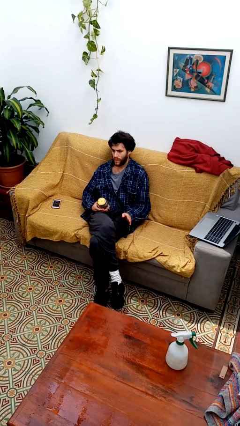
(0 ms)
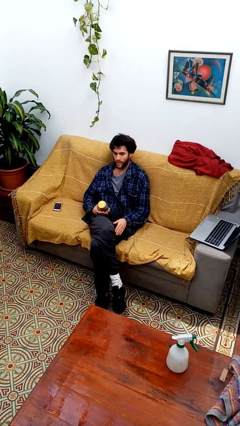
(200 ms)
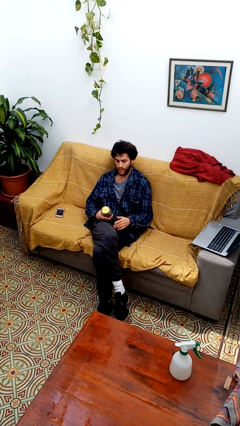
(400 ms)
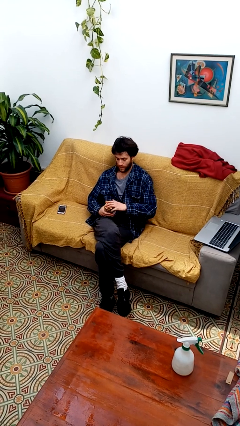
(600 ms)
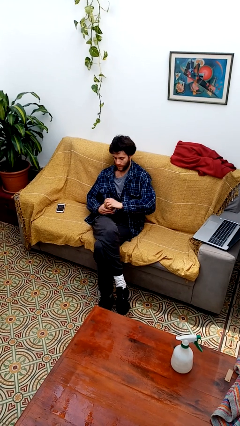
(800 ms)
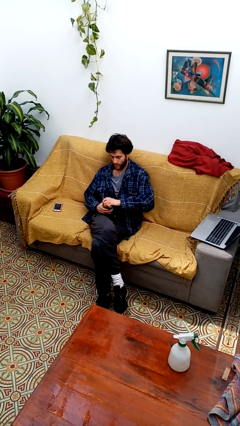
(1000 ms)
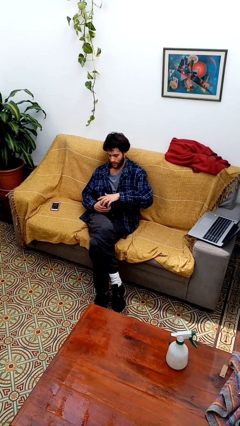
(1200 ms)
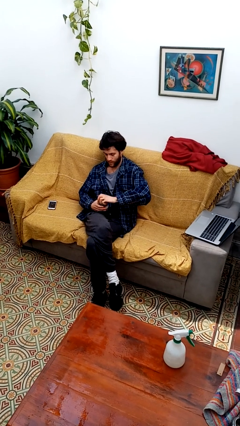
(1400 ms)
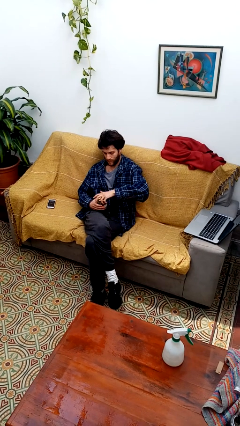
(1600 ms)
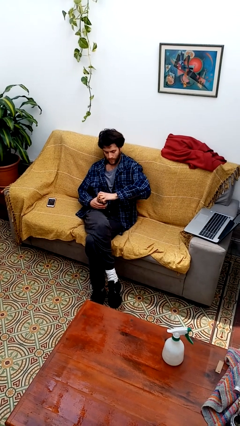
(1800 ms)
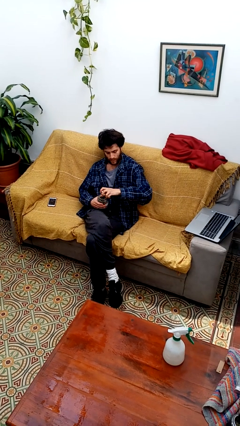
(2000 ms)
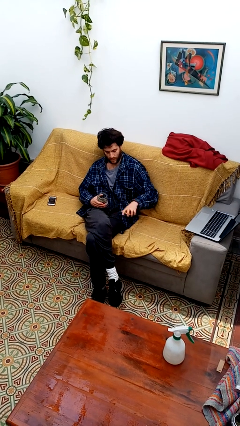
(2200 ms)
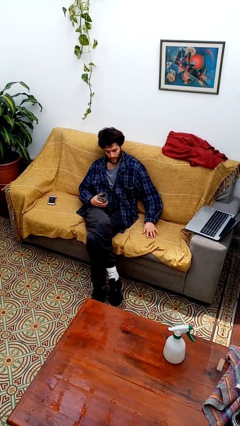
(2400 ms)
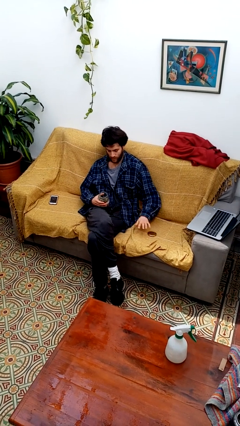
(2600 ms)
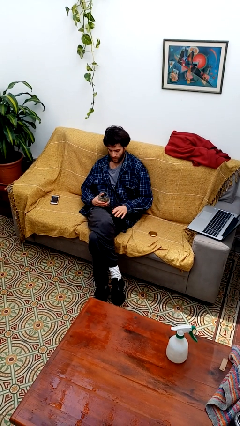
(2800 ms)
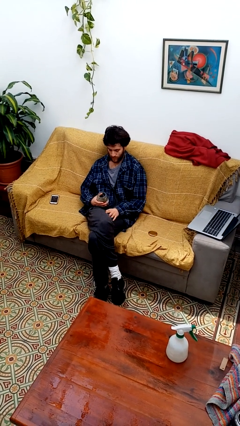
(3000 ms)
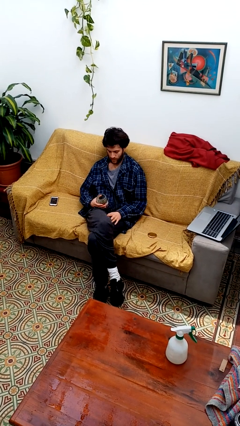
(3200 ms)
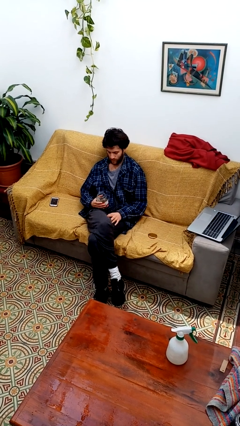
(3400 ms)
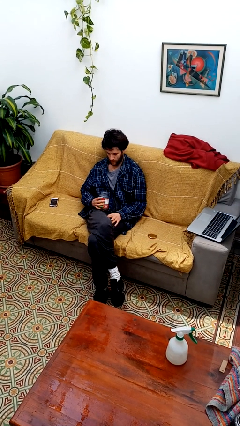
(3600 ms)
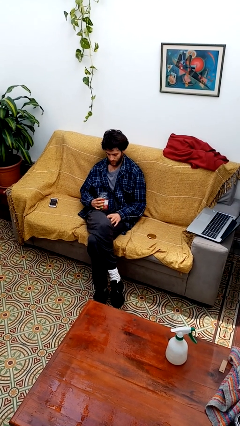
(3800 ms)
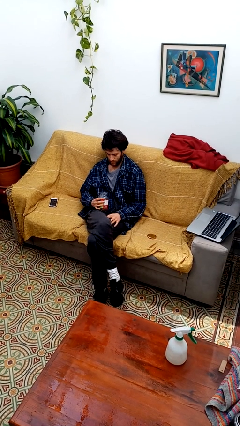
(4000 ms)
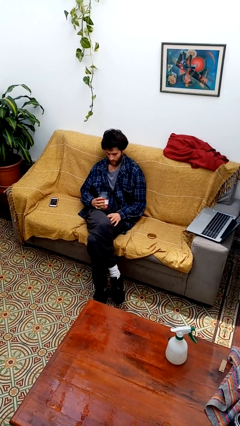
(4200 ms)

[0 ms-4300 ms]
person opens jar

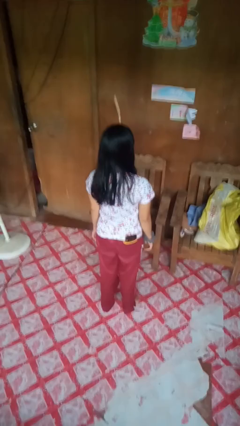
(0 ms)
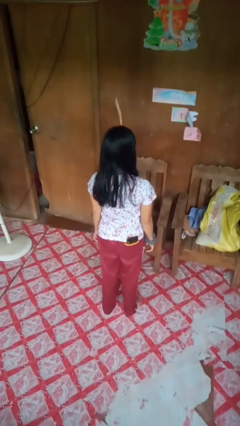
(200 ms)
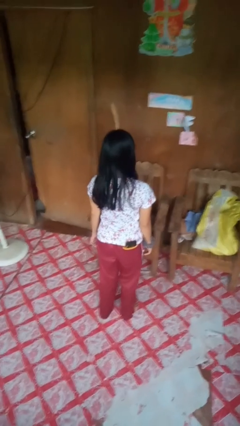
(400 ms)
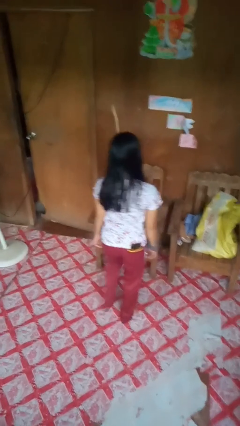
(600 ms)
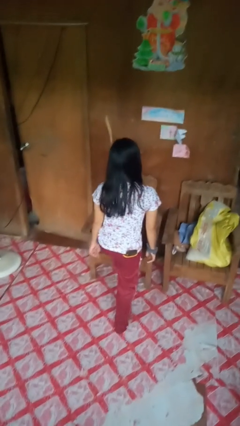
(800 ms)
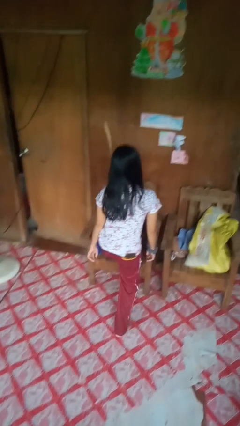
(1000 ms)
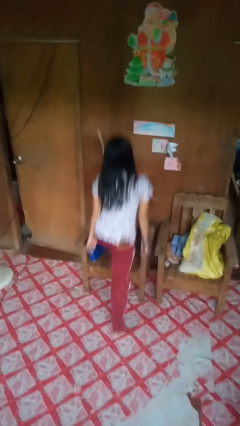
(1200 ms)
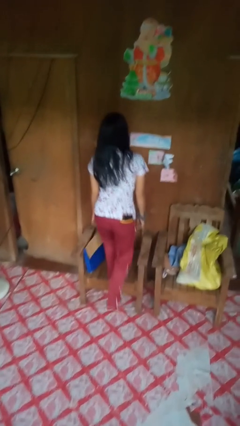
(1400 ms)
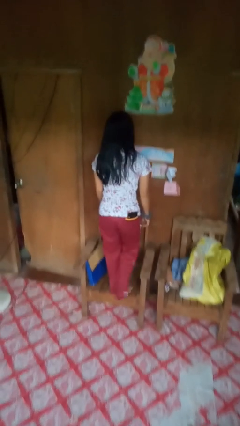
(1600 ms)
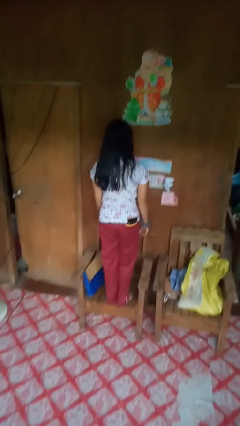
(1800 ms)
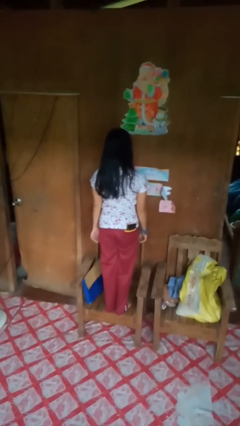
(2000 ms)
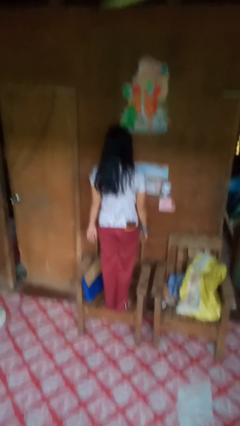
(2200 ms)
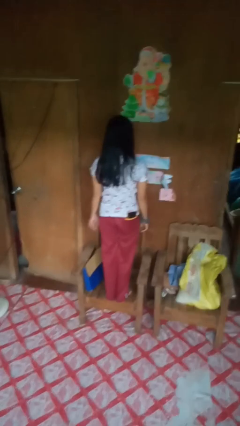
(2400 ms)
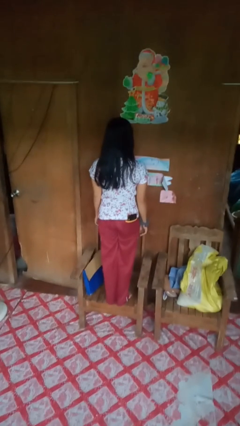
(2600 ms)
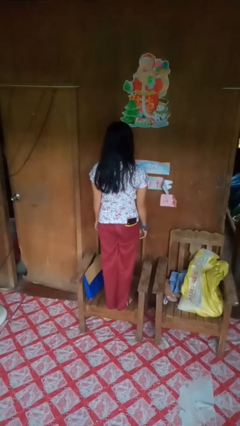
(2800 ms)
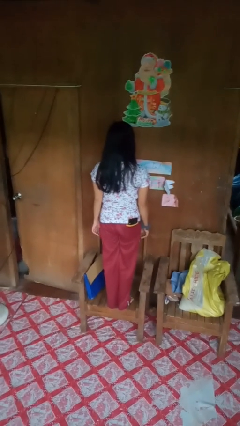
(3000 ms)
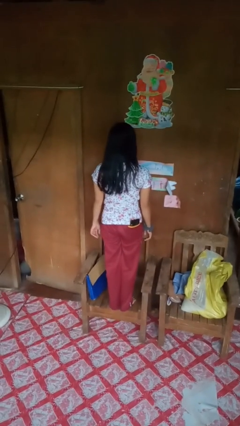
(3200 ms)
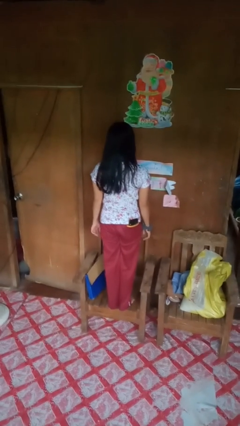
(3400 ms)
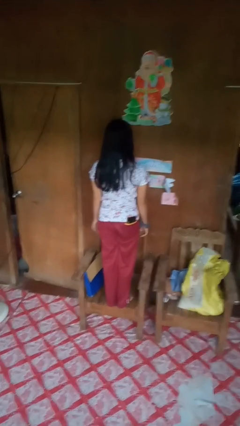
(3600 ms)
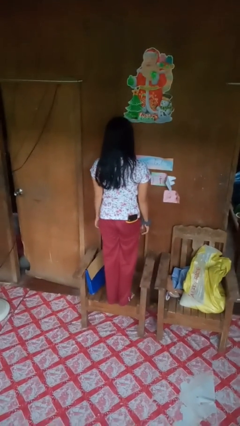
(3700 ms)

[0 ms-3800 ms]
person climbs on chair

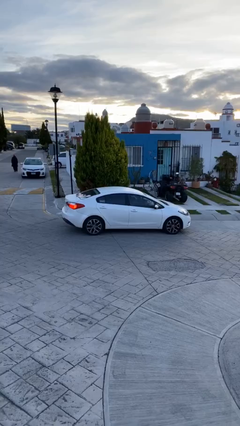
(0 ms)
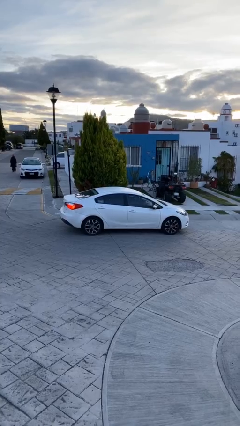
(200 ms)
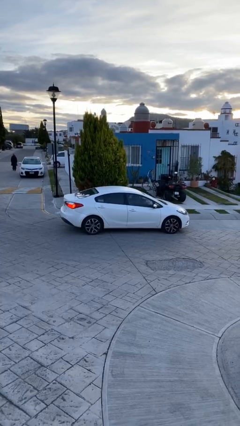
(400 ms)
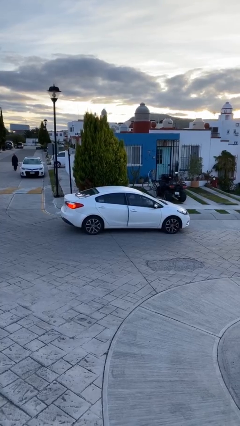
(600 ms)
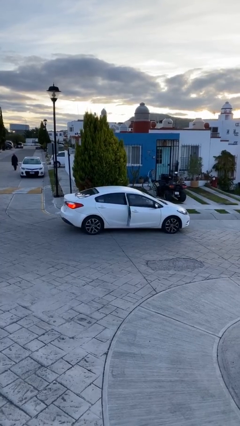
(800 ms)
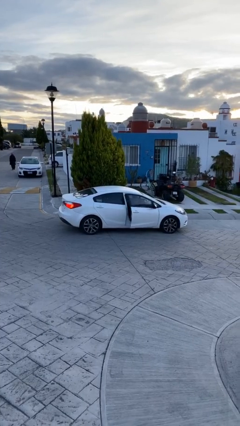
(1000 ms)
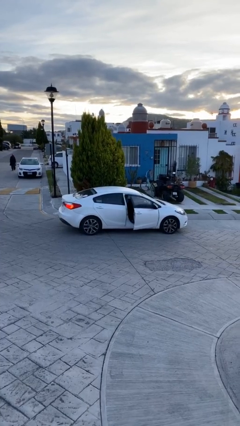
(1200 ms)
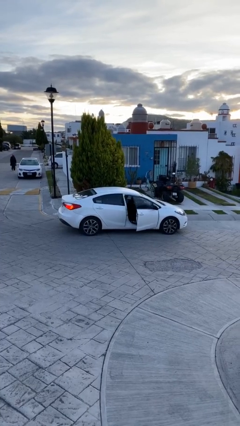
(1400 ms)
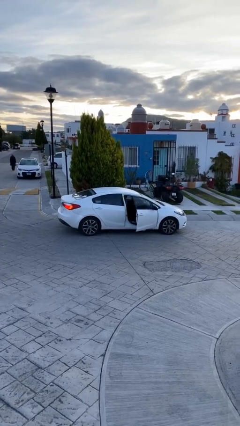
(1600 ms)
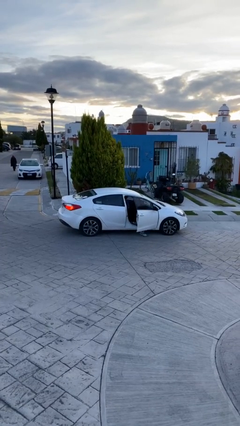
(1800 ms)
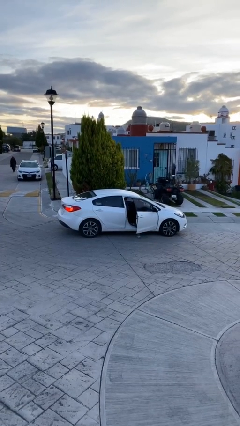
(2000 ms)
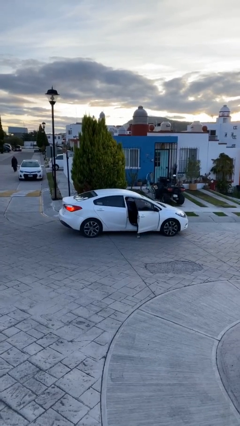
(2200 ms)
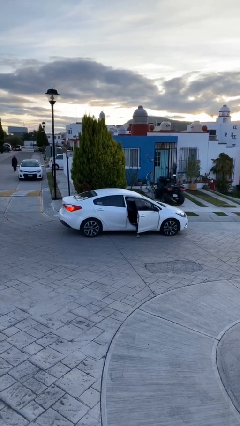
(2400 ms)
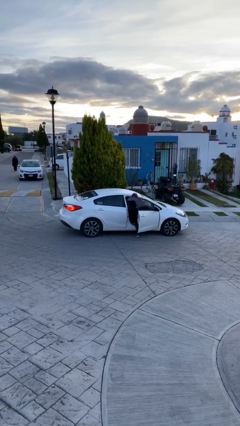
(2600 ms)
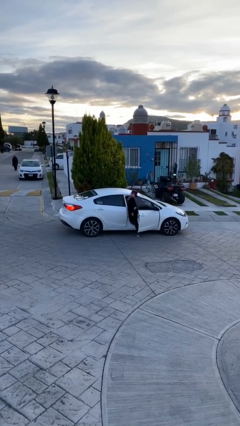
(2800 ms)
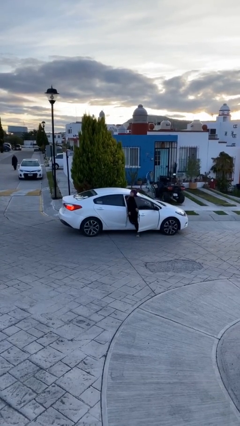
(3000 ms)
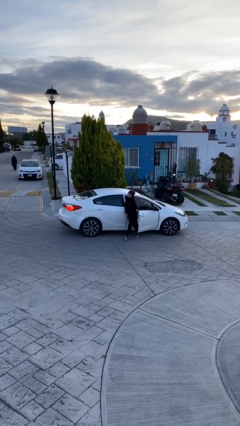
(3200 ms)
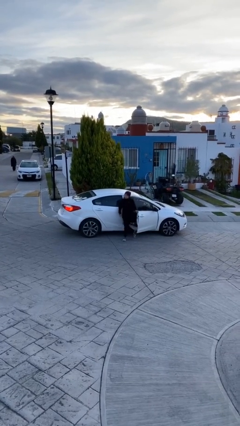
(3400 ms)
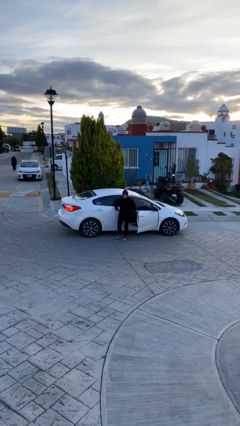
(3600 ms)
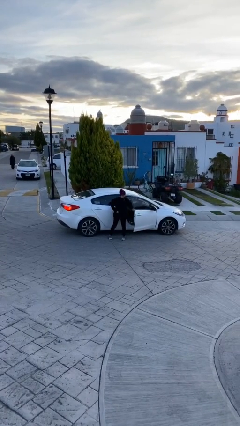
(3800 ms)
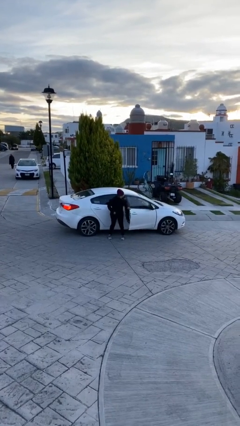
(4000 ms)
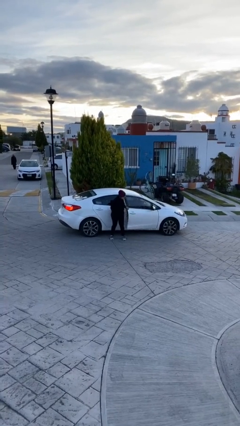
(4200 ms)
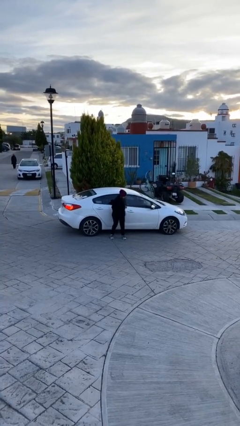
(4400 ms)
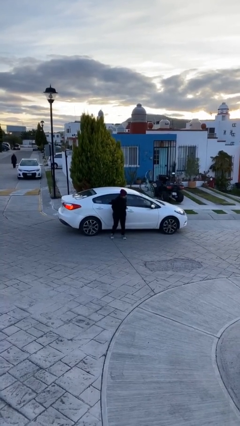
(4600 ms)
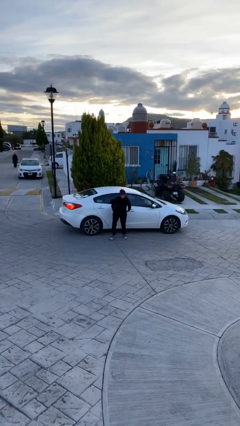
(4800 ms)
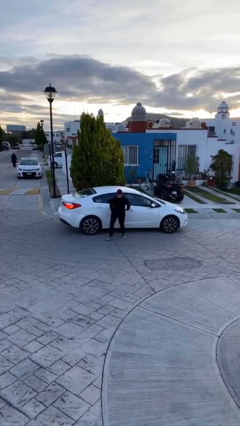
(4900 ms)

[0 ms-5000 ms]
car drops off person

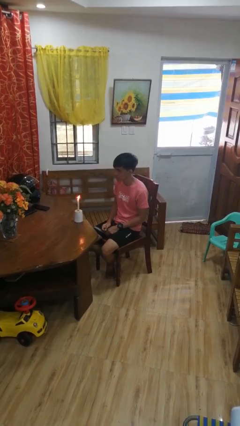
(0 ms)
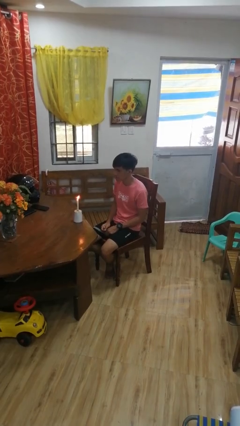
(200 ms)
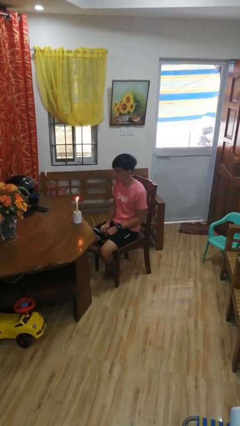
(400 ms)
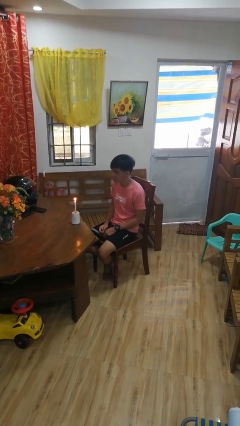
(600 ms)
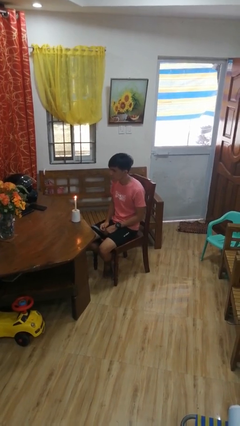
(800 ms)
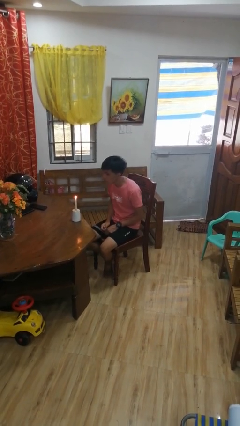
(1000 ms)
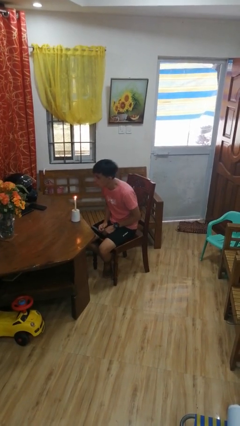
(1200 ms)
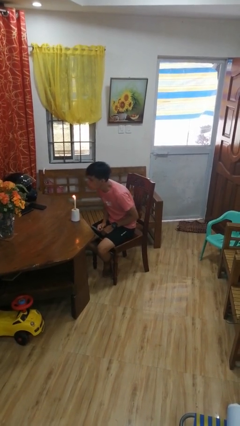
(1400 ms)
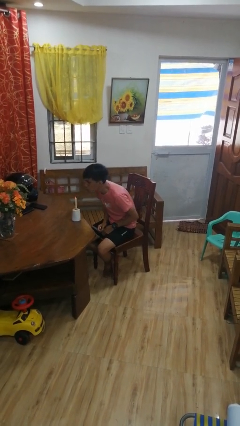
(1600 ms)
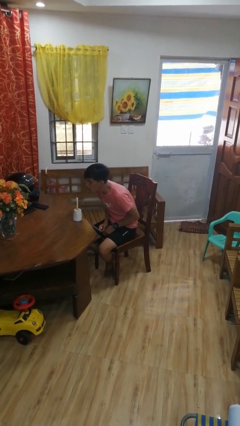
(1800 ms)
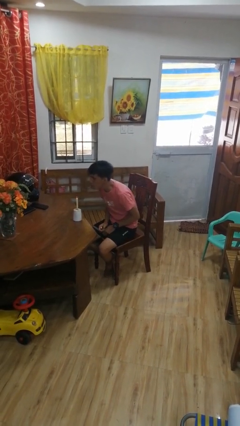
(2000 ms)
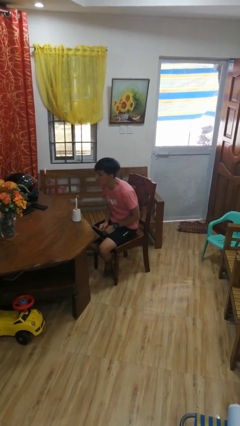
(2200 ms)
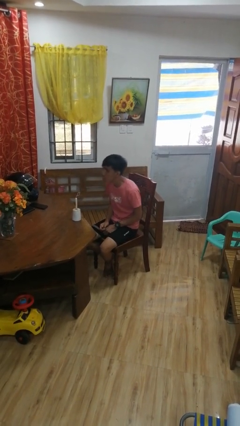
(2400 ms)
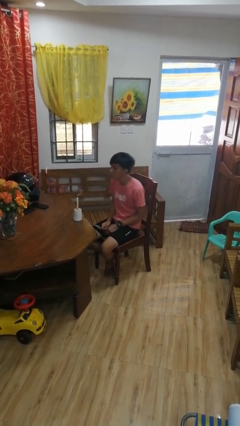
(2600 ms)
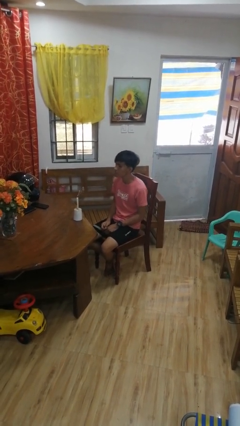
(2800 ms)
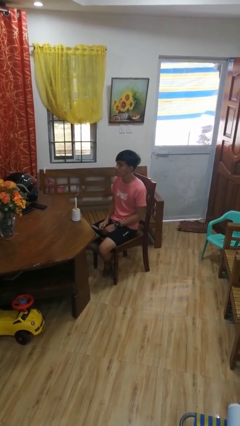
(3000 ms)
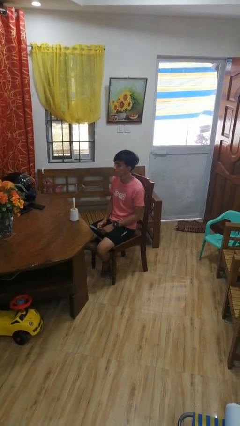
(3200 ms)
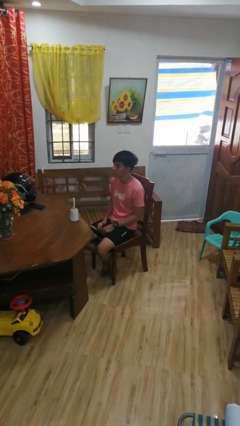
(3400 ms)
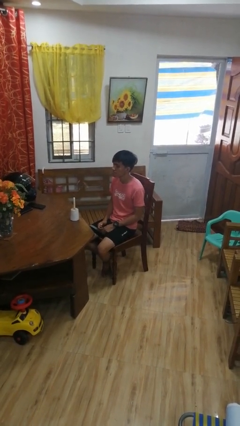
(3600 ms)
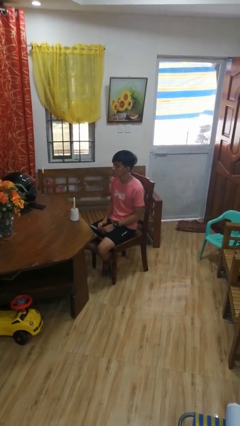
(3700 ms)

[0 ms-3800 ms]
person extinguishes candle

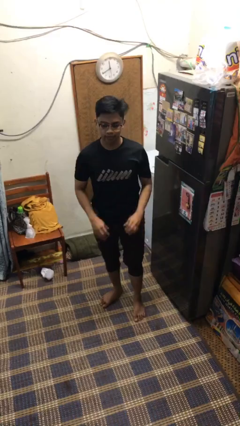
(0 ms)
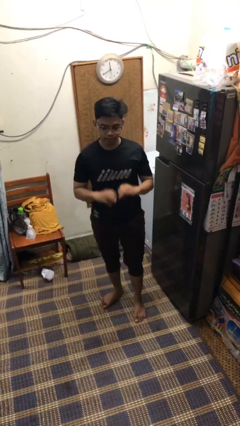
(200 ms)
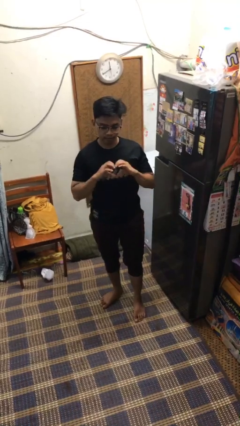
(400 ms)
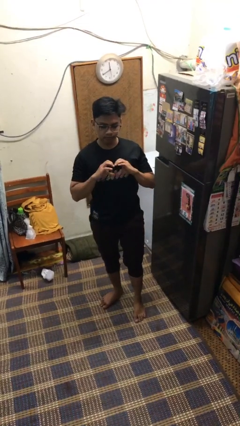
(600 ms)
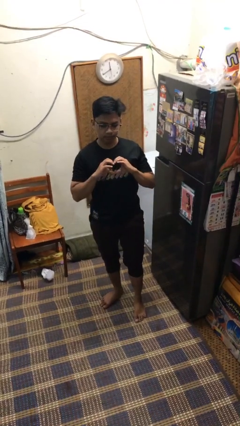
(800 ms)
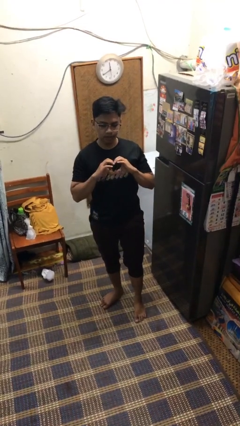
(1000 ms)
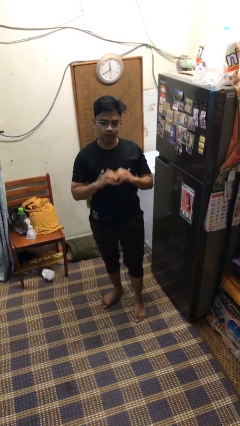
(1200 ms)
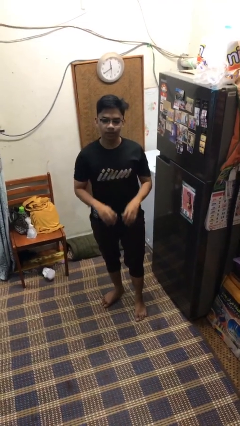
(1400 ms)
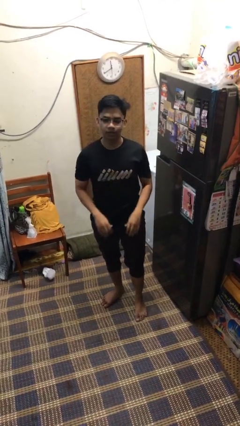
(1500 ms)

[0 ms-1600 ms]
person gestures heart
